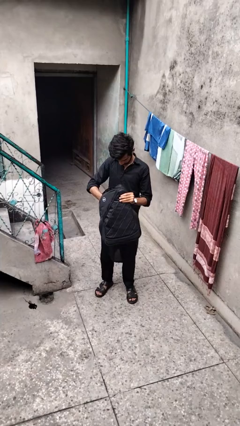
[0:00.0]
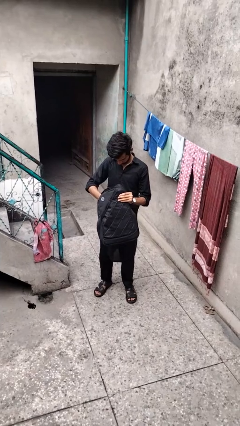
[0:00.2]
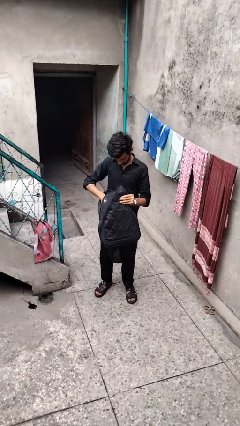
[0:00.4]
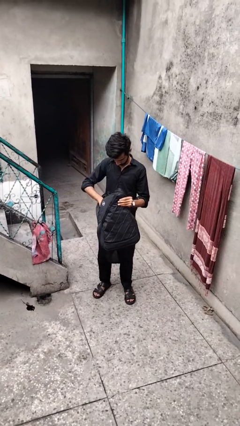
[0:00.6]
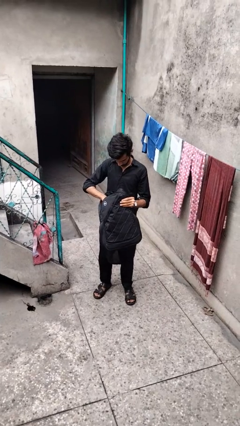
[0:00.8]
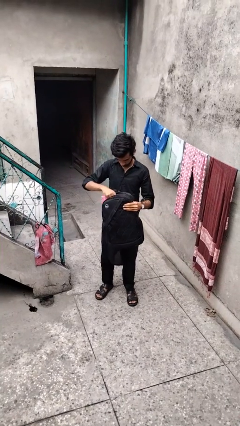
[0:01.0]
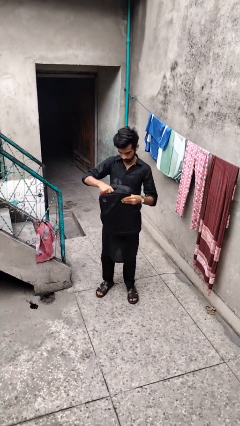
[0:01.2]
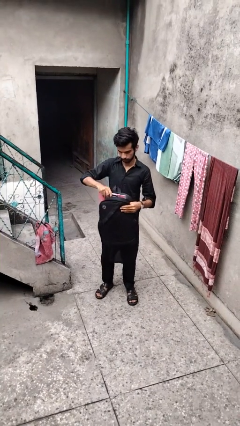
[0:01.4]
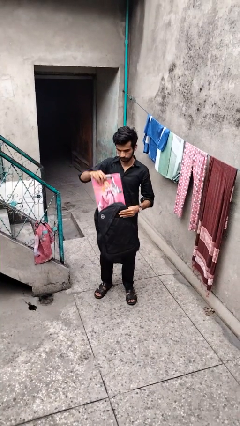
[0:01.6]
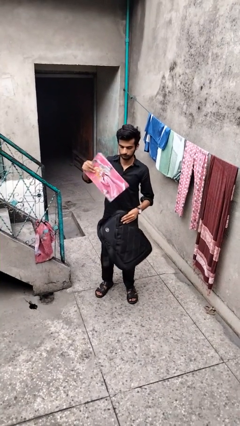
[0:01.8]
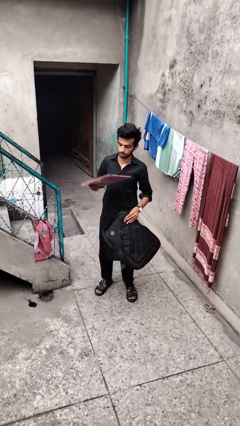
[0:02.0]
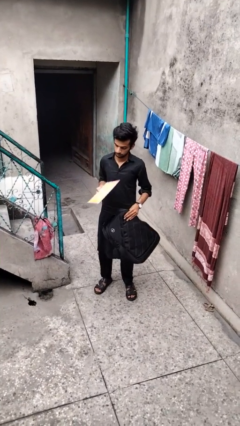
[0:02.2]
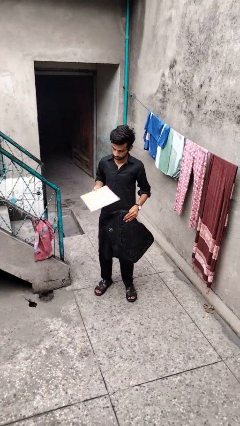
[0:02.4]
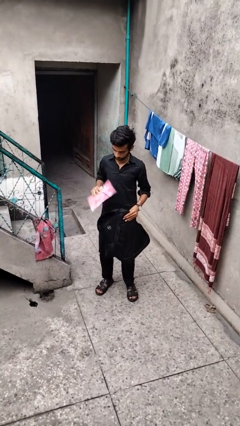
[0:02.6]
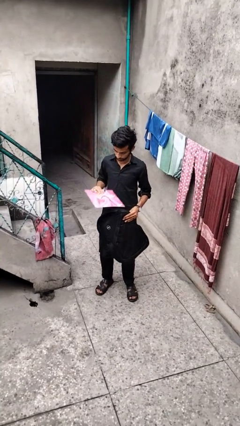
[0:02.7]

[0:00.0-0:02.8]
person takes object from backpack

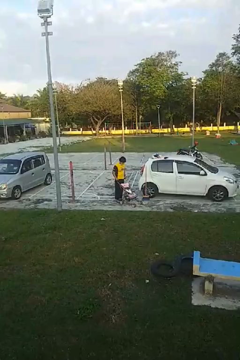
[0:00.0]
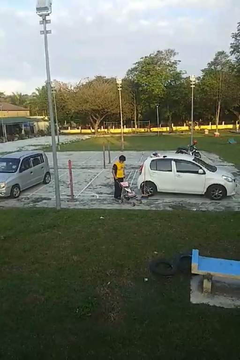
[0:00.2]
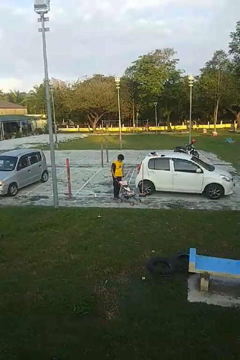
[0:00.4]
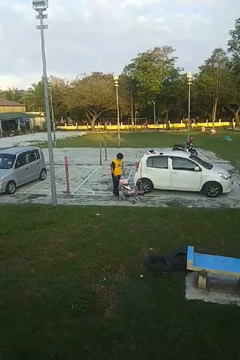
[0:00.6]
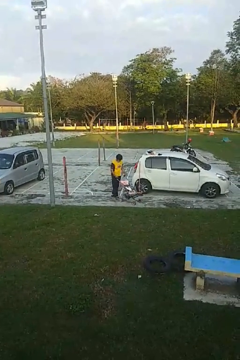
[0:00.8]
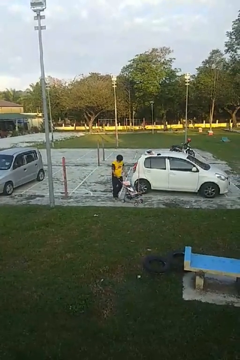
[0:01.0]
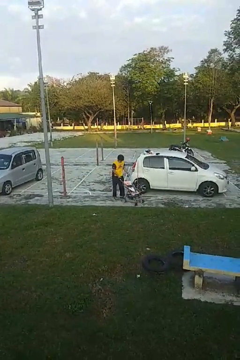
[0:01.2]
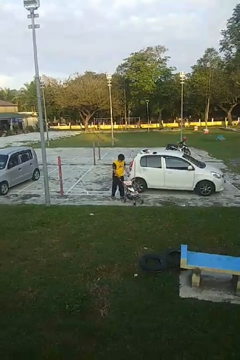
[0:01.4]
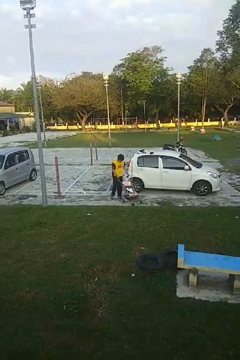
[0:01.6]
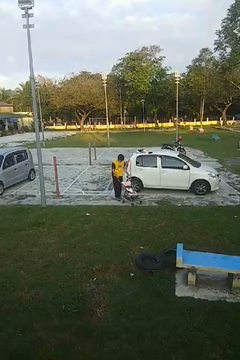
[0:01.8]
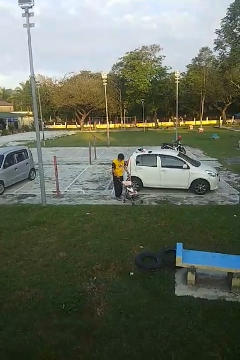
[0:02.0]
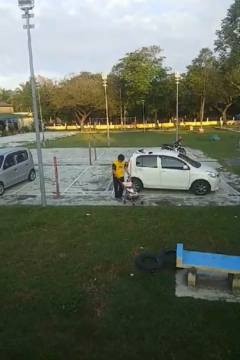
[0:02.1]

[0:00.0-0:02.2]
person pushes wheeled cart

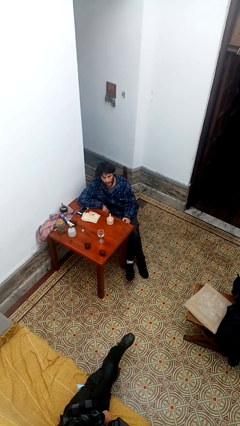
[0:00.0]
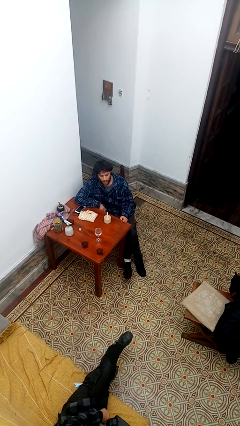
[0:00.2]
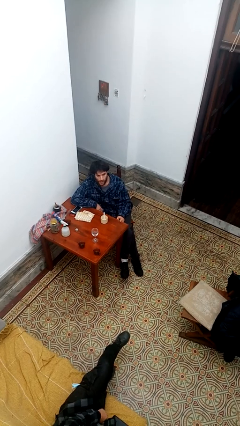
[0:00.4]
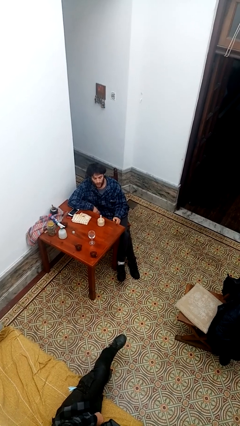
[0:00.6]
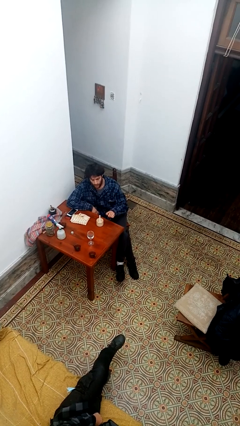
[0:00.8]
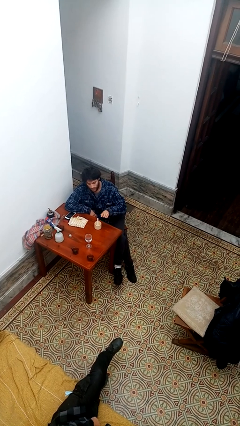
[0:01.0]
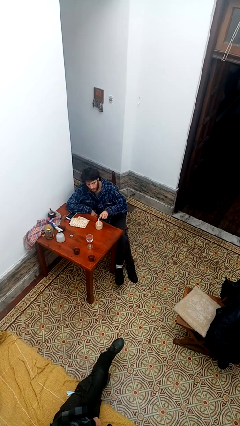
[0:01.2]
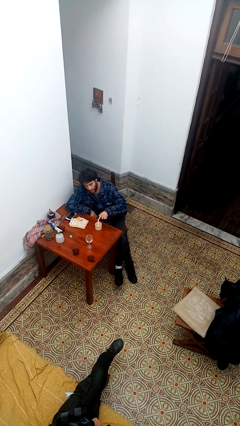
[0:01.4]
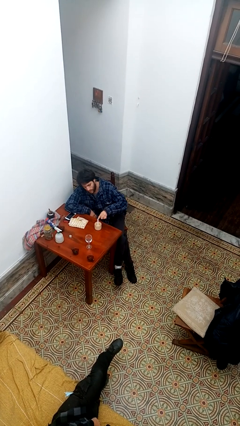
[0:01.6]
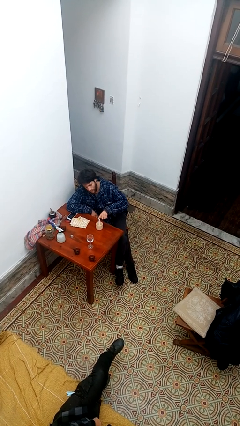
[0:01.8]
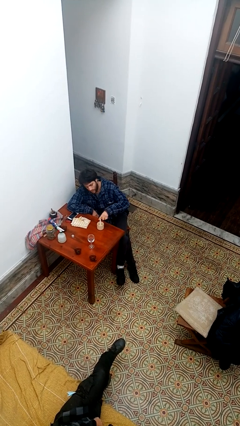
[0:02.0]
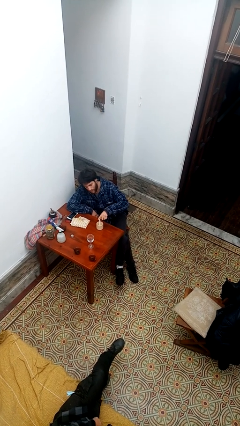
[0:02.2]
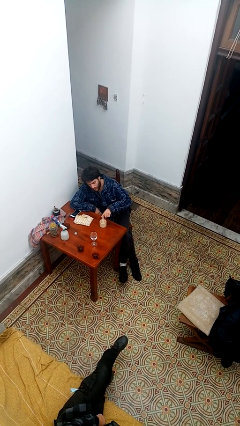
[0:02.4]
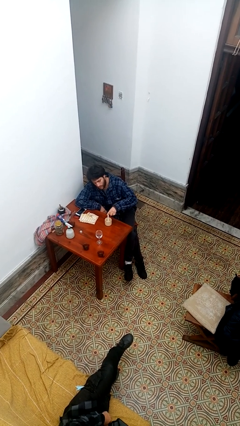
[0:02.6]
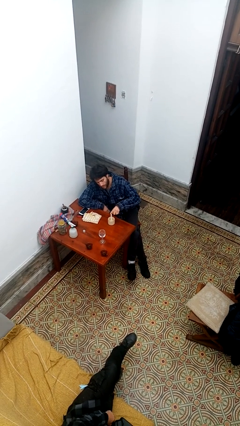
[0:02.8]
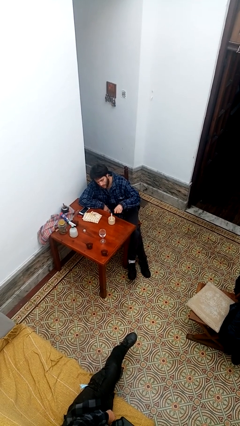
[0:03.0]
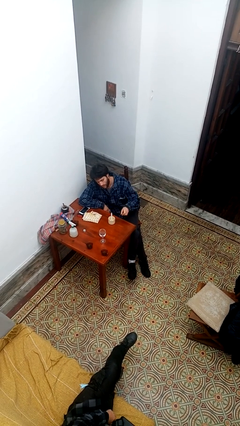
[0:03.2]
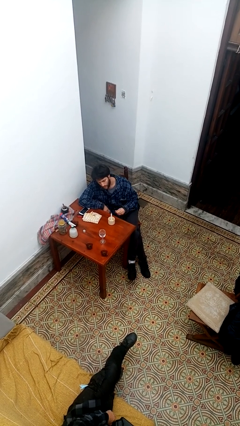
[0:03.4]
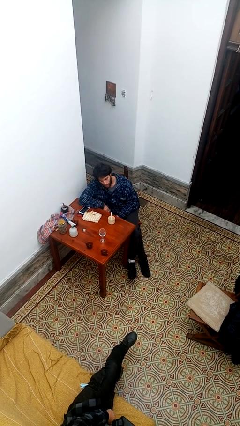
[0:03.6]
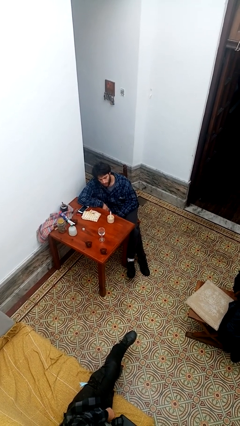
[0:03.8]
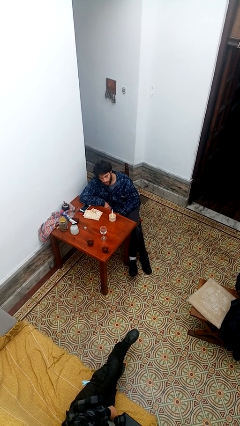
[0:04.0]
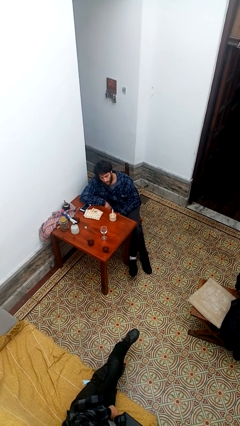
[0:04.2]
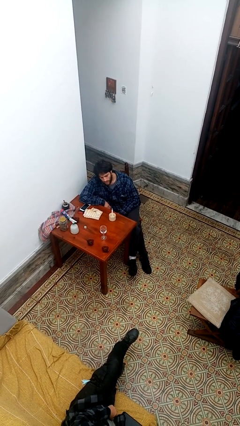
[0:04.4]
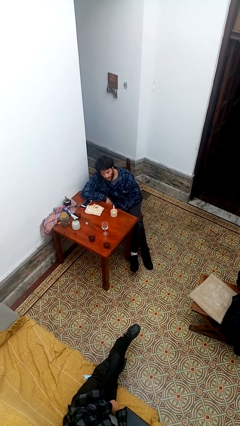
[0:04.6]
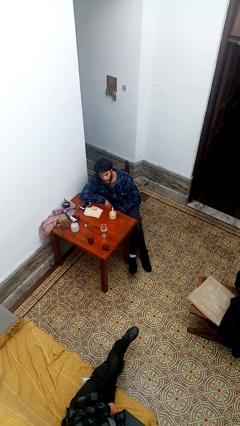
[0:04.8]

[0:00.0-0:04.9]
person lights candle

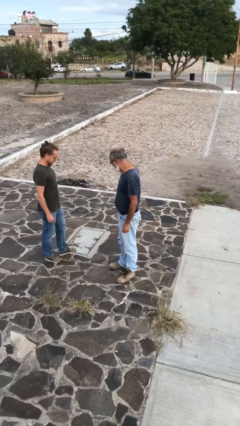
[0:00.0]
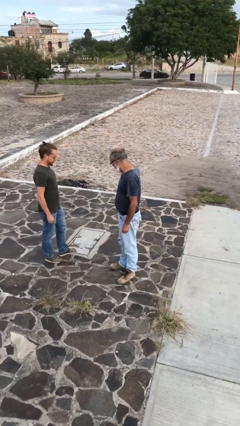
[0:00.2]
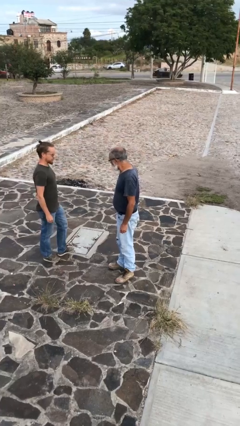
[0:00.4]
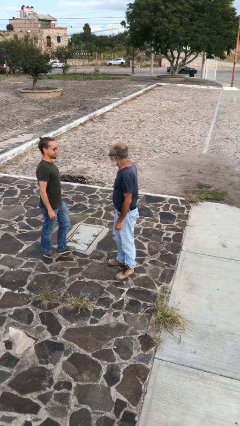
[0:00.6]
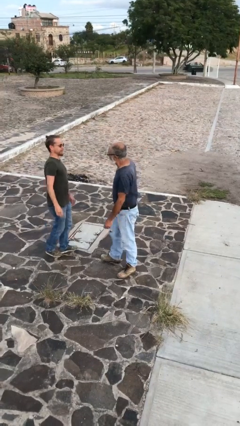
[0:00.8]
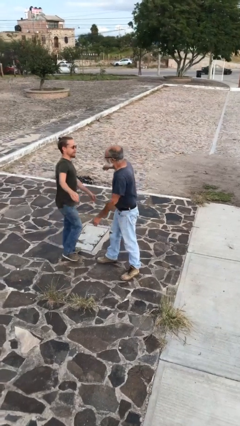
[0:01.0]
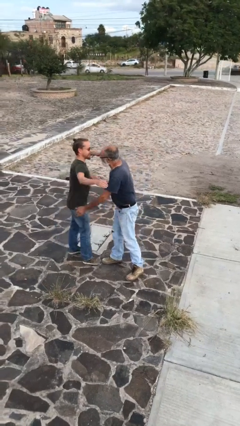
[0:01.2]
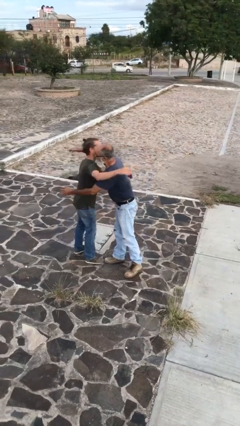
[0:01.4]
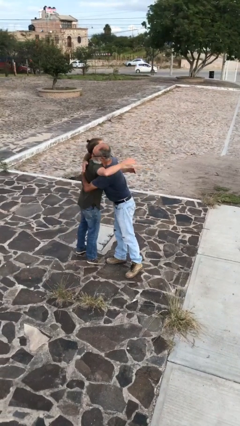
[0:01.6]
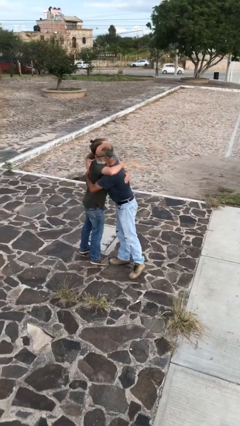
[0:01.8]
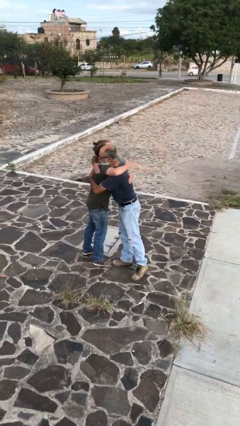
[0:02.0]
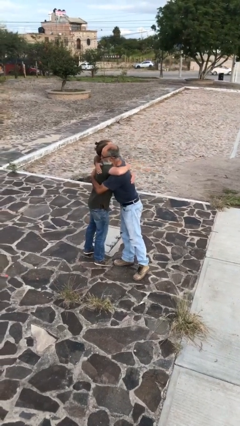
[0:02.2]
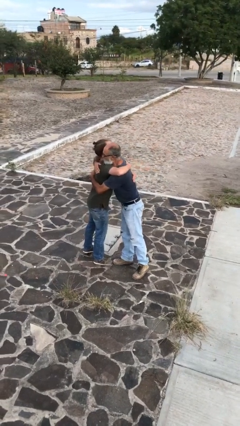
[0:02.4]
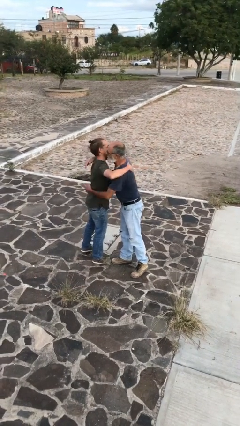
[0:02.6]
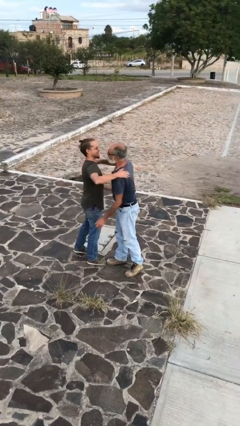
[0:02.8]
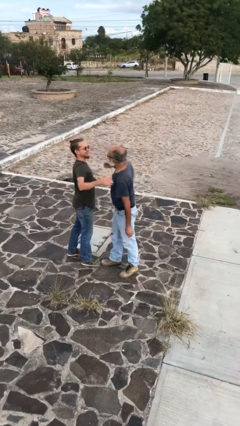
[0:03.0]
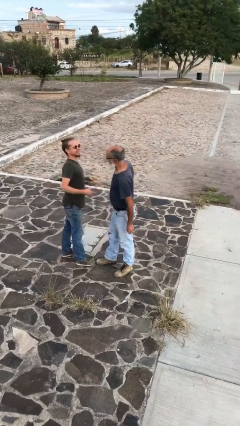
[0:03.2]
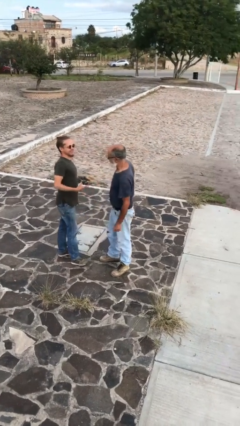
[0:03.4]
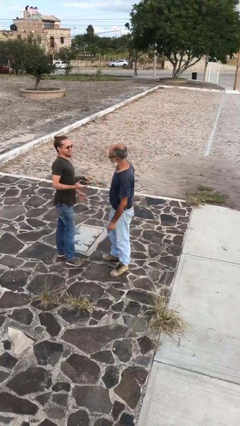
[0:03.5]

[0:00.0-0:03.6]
person embraces person

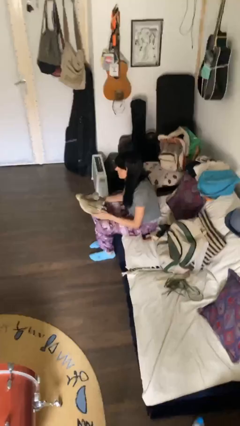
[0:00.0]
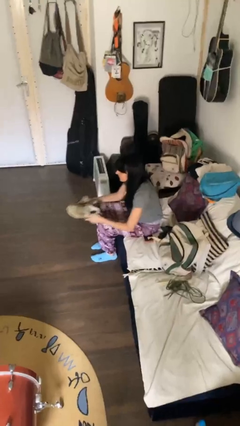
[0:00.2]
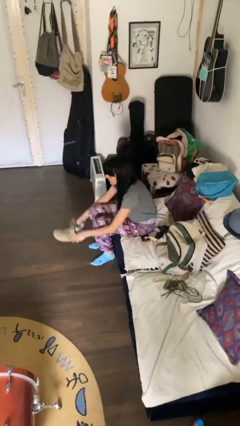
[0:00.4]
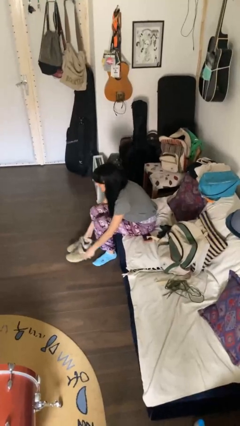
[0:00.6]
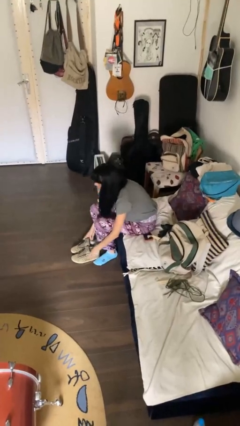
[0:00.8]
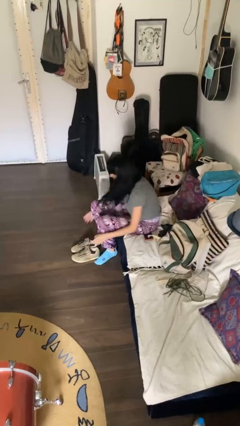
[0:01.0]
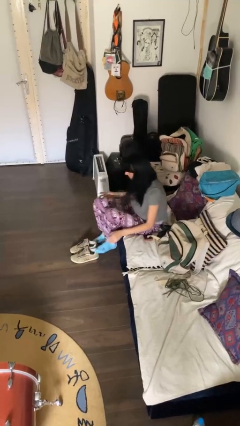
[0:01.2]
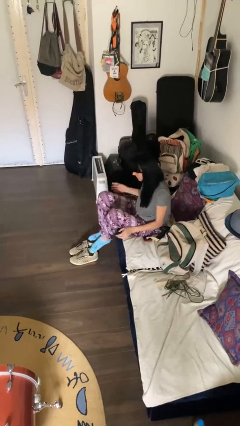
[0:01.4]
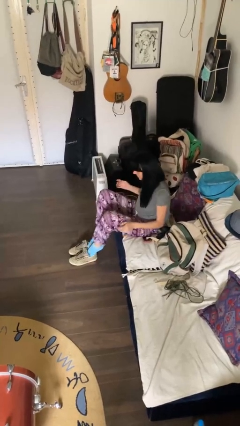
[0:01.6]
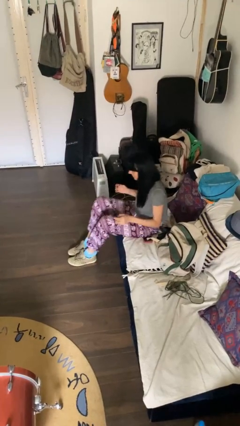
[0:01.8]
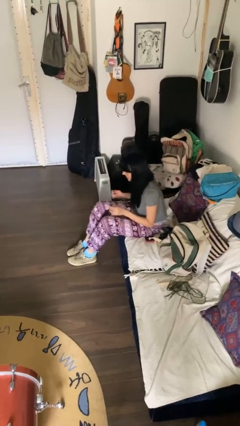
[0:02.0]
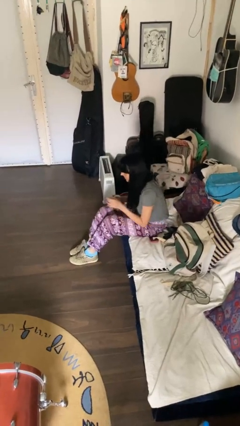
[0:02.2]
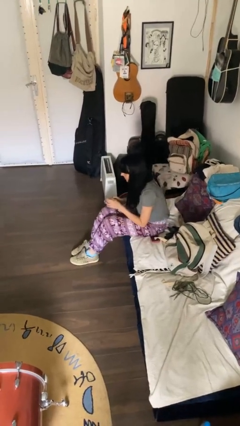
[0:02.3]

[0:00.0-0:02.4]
person puts on shoes

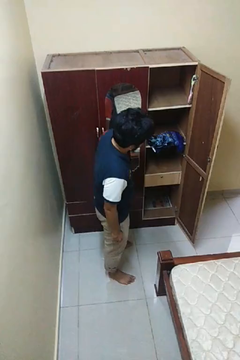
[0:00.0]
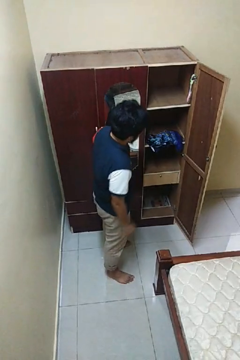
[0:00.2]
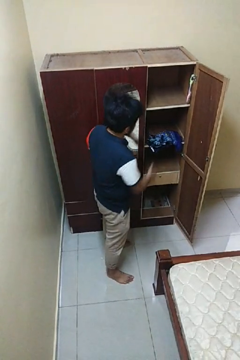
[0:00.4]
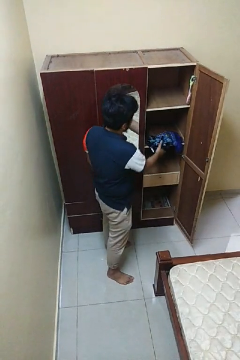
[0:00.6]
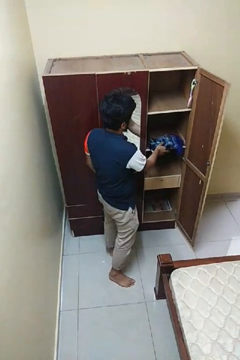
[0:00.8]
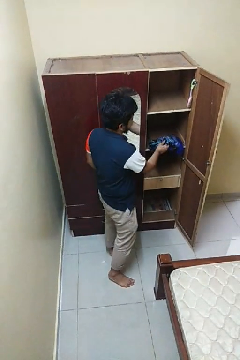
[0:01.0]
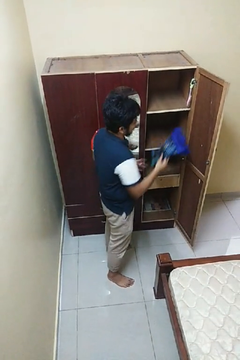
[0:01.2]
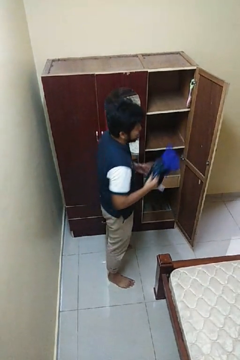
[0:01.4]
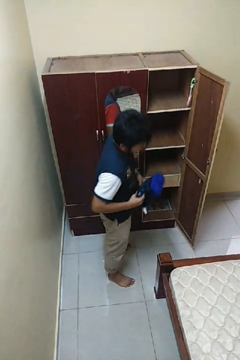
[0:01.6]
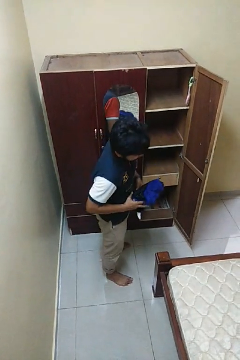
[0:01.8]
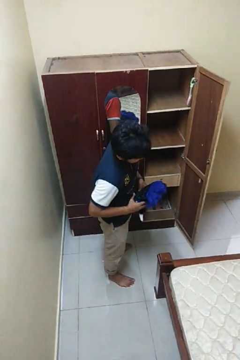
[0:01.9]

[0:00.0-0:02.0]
person picks up object from cabinet

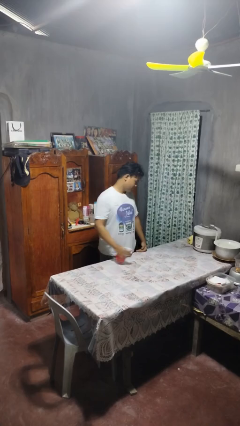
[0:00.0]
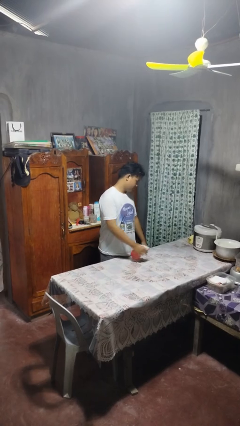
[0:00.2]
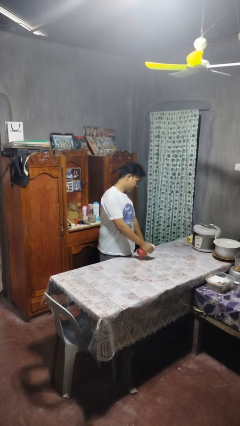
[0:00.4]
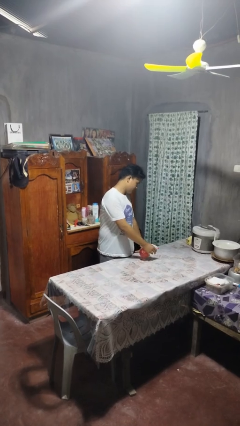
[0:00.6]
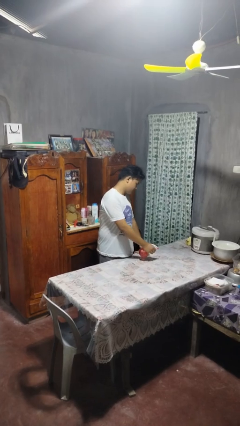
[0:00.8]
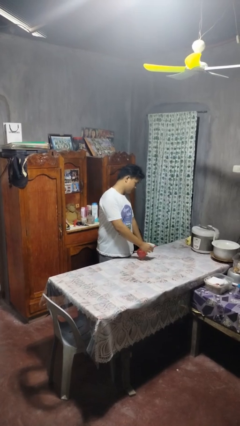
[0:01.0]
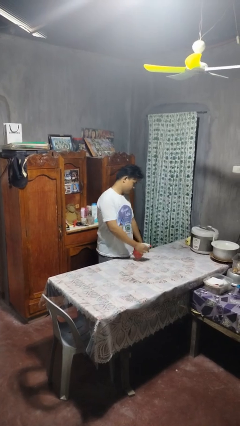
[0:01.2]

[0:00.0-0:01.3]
person sprays from bottle
